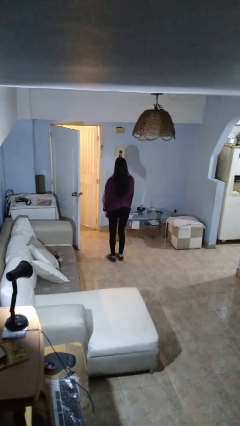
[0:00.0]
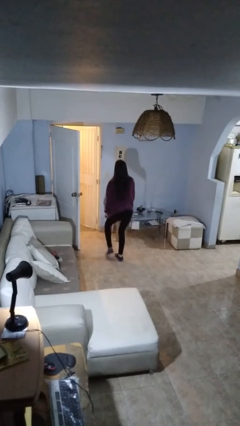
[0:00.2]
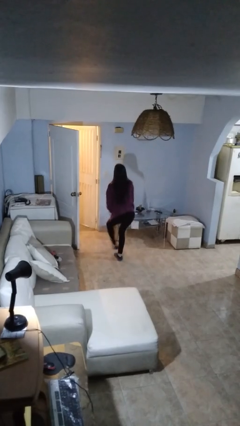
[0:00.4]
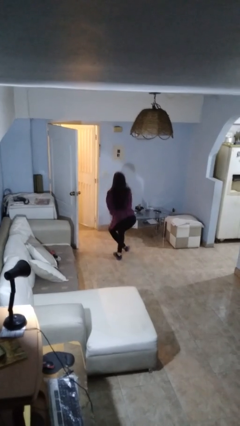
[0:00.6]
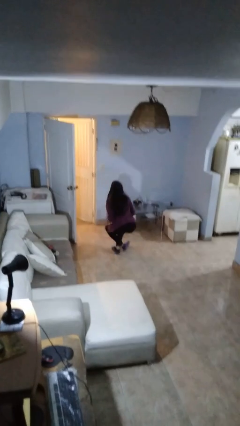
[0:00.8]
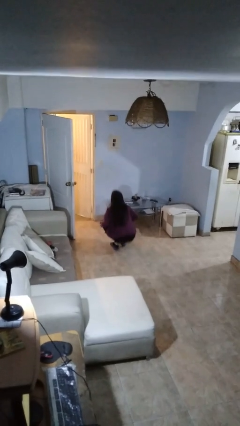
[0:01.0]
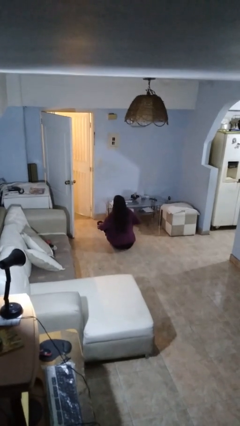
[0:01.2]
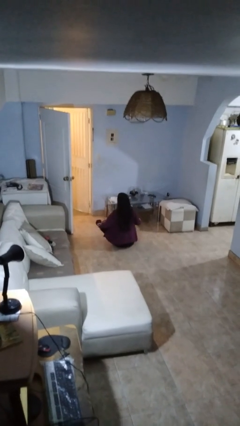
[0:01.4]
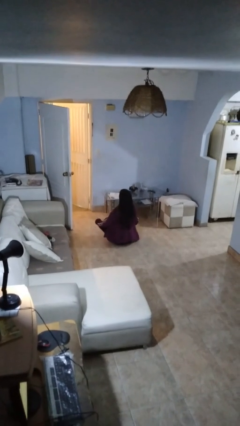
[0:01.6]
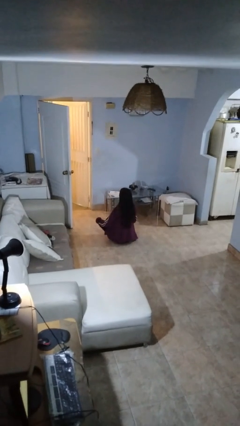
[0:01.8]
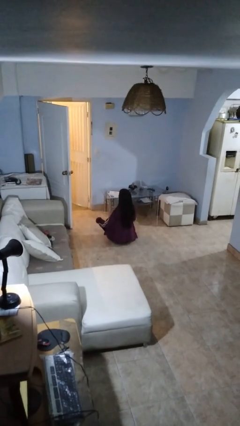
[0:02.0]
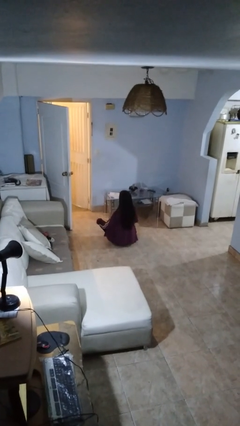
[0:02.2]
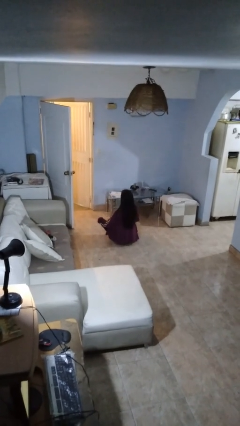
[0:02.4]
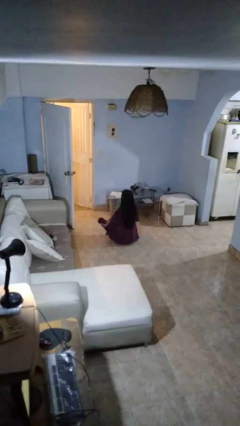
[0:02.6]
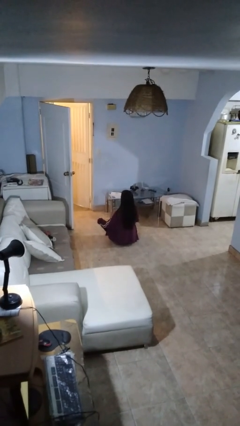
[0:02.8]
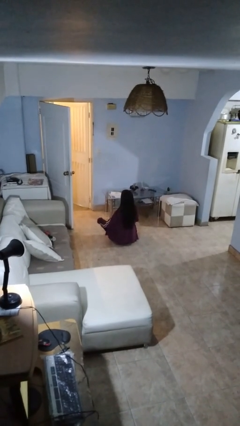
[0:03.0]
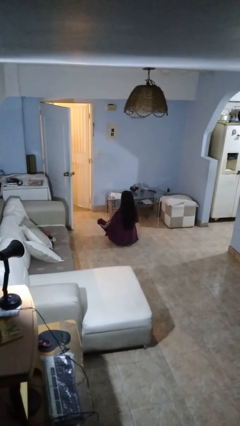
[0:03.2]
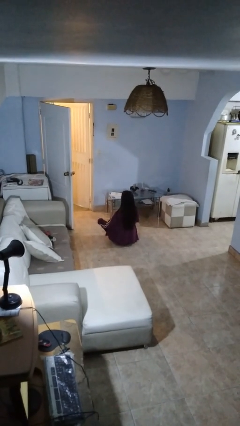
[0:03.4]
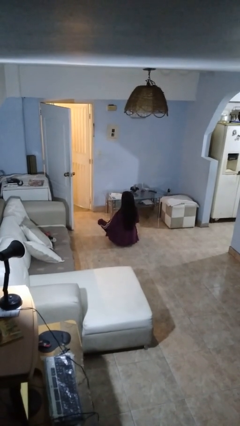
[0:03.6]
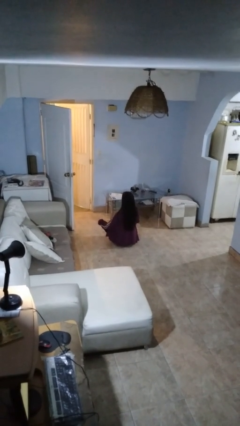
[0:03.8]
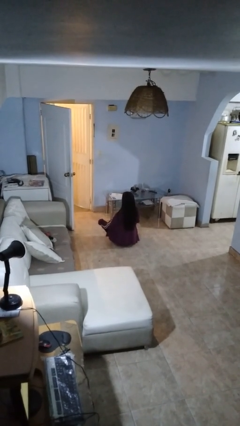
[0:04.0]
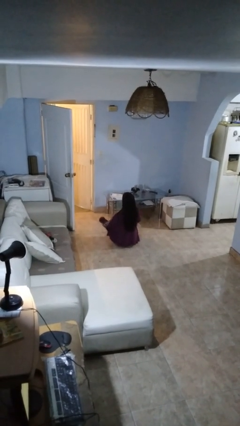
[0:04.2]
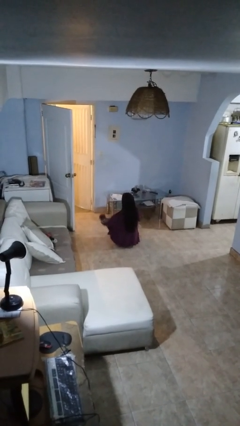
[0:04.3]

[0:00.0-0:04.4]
person sits crisscross

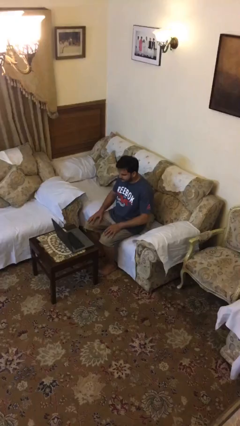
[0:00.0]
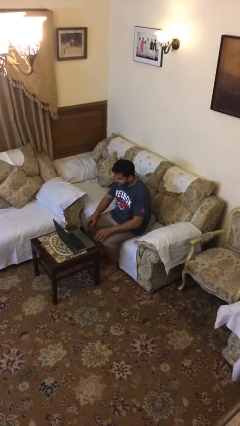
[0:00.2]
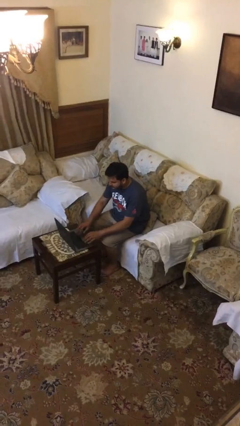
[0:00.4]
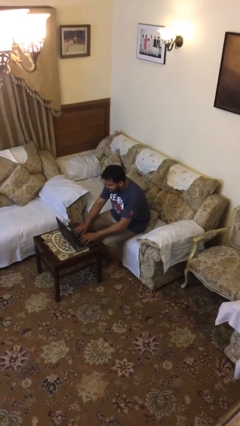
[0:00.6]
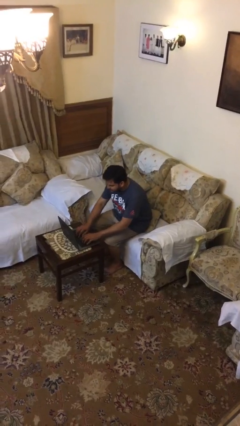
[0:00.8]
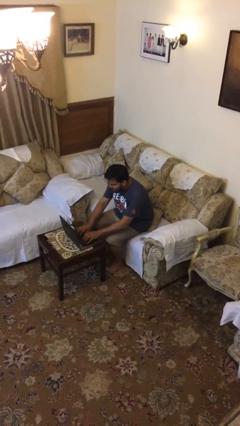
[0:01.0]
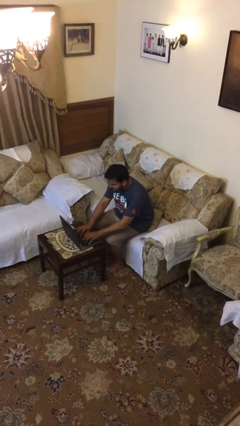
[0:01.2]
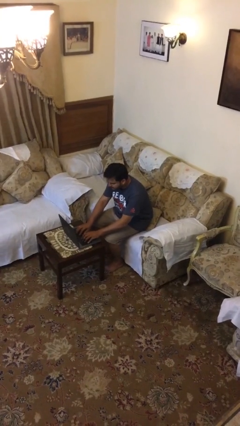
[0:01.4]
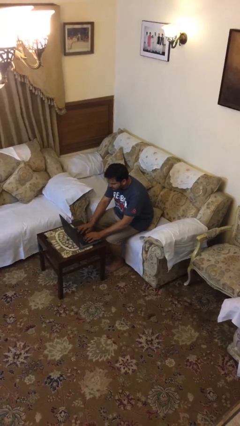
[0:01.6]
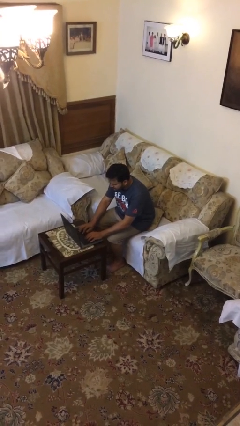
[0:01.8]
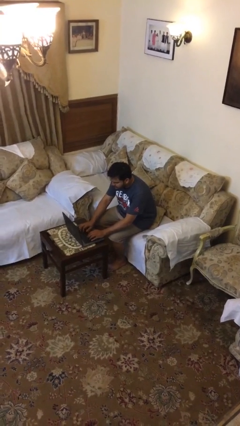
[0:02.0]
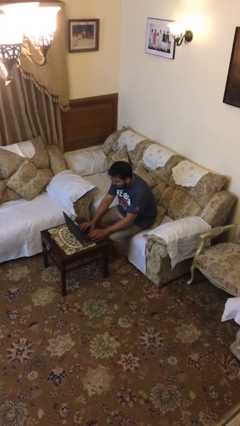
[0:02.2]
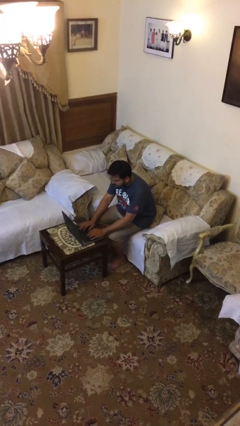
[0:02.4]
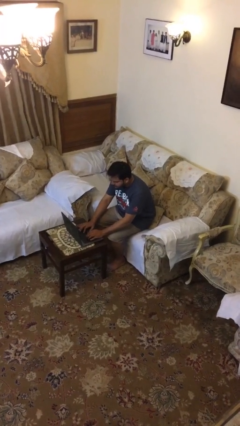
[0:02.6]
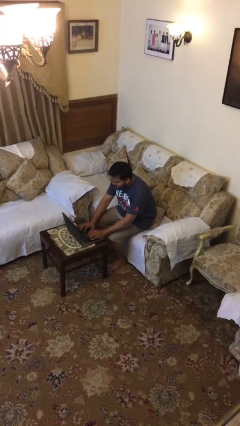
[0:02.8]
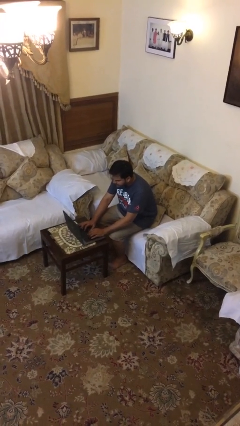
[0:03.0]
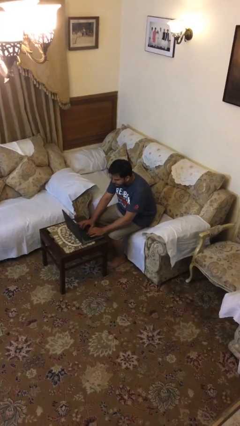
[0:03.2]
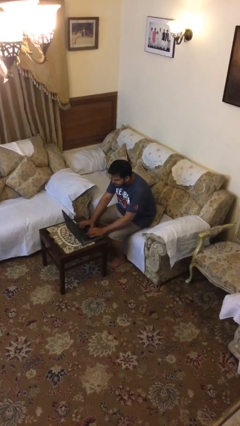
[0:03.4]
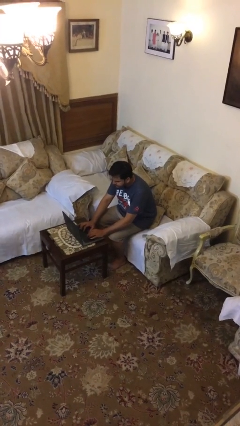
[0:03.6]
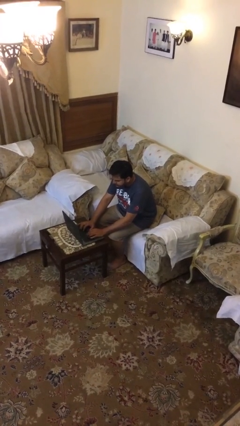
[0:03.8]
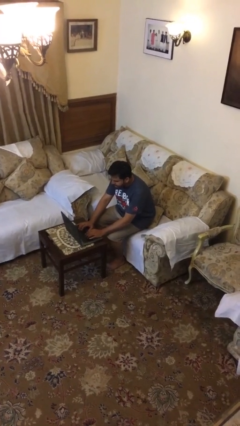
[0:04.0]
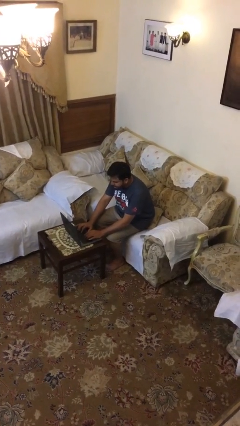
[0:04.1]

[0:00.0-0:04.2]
person interacts with laptop

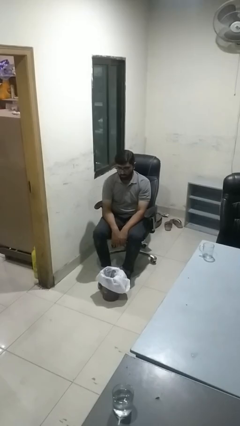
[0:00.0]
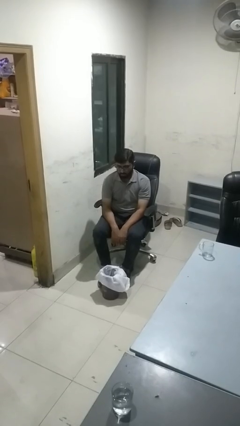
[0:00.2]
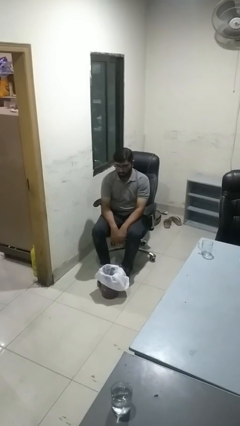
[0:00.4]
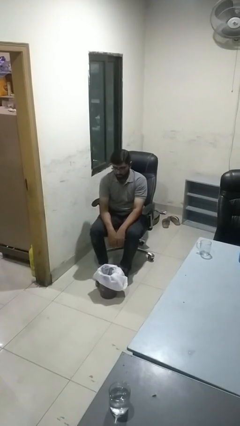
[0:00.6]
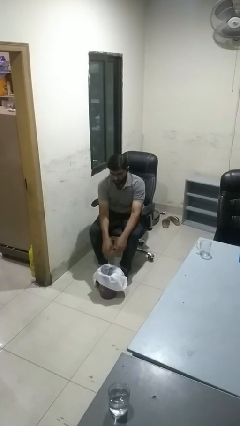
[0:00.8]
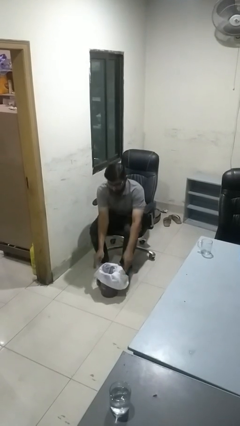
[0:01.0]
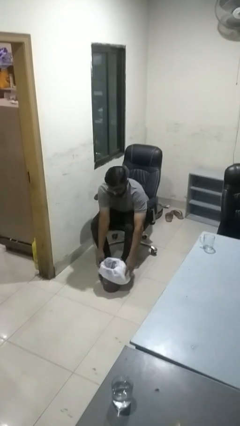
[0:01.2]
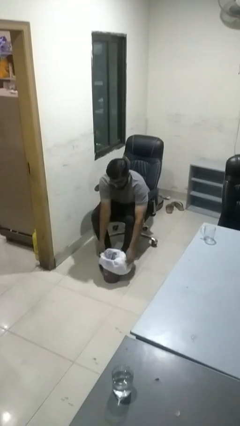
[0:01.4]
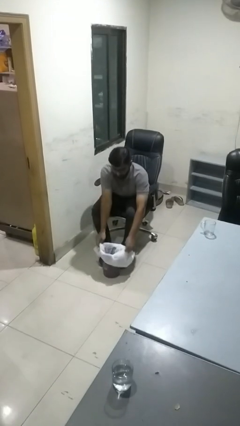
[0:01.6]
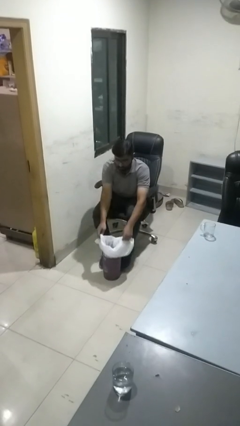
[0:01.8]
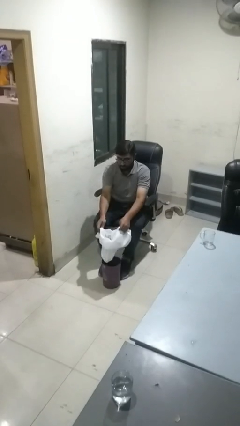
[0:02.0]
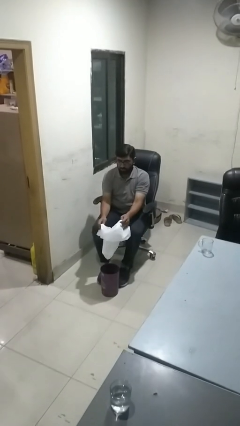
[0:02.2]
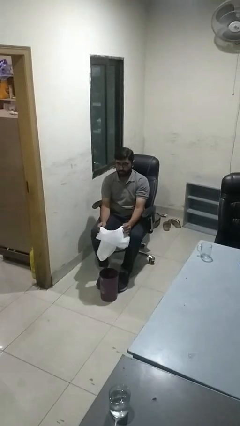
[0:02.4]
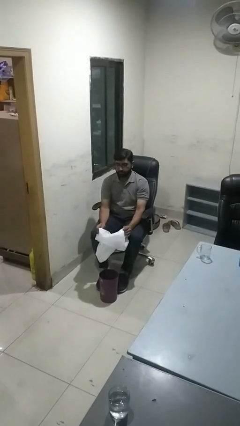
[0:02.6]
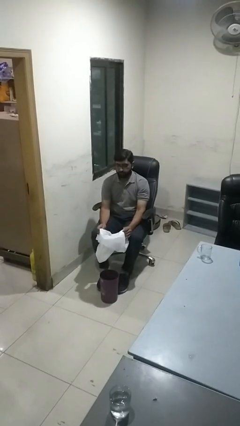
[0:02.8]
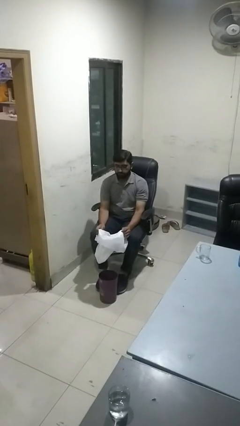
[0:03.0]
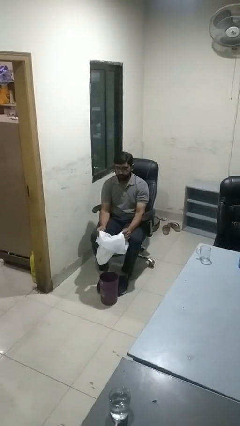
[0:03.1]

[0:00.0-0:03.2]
person removes trashbag from trashcan

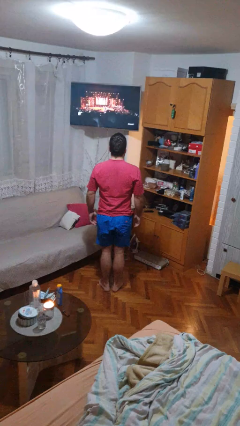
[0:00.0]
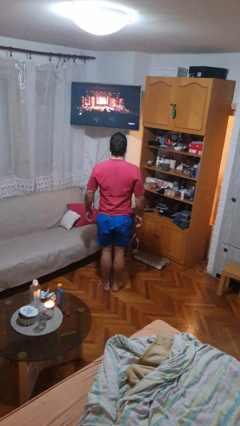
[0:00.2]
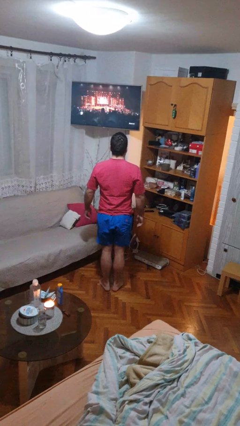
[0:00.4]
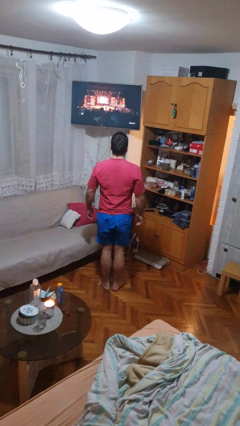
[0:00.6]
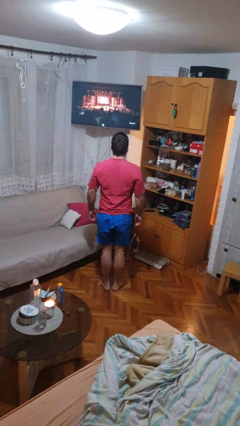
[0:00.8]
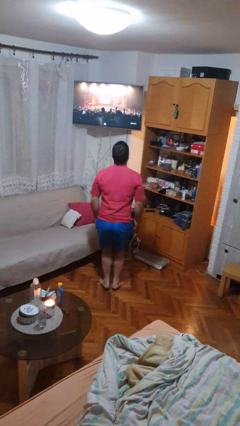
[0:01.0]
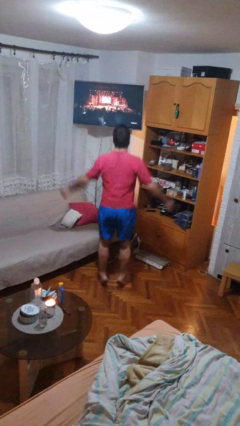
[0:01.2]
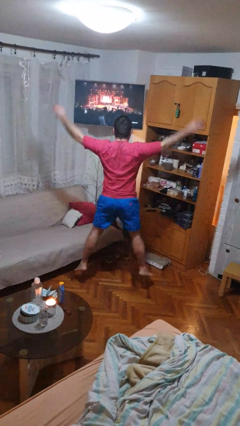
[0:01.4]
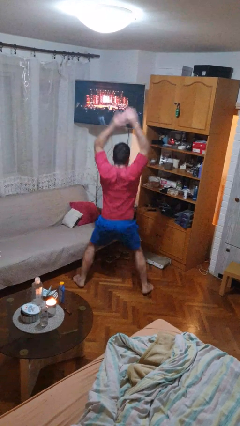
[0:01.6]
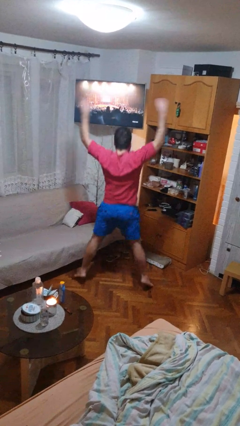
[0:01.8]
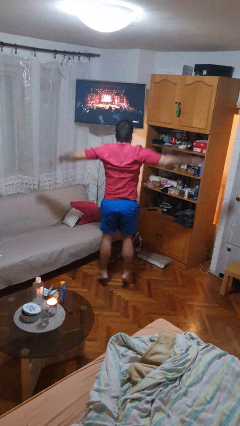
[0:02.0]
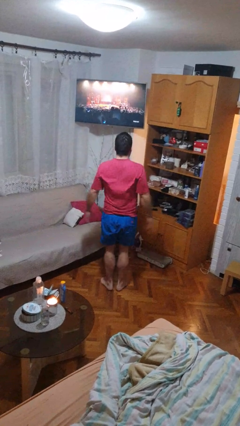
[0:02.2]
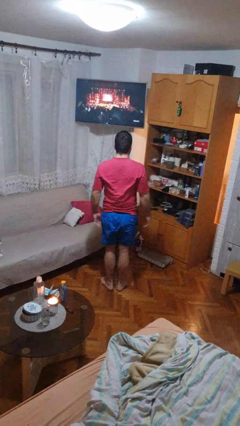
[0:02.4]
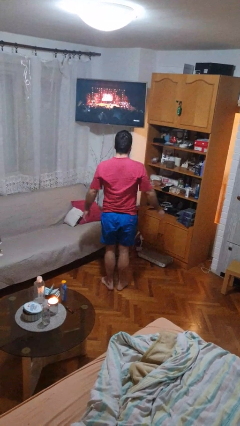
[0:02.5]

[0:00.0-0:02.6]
person exercises with jumping jacks

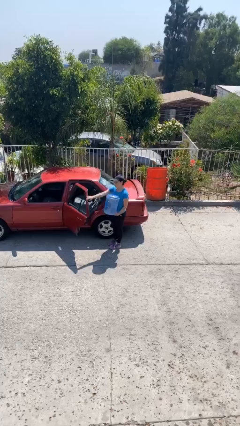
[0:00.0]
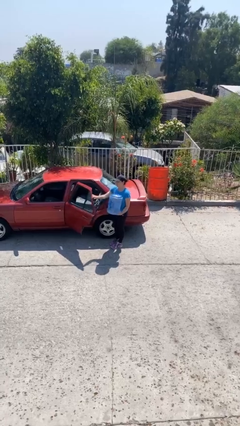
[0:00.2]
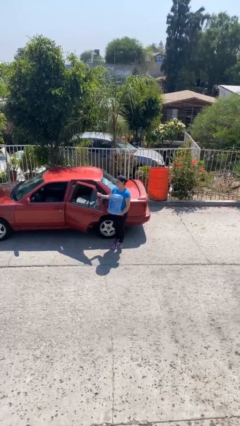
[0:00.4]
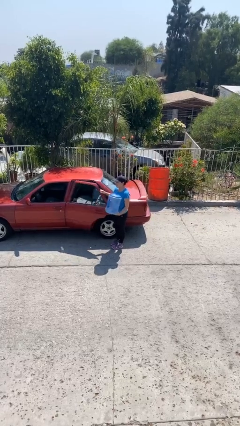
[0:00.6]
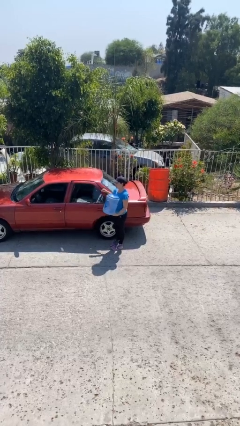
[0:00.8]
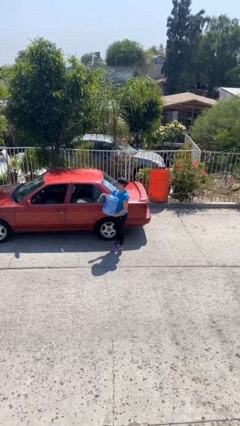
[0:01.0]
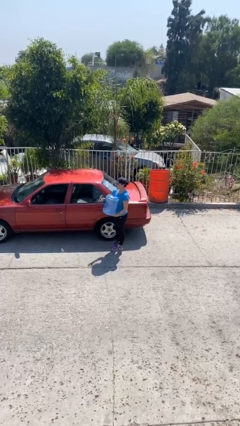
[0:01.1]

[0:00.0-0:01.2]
person closes car door

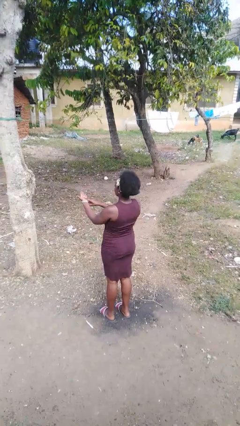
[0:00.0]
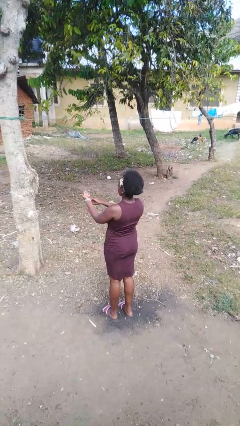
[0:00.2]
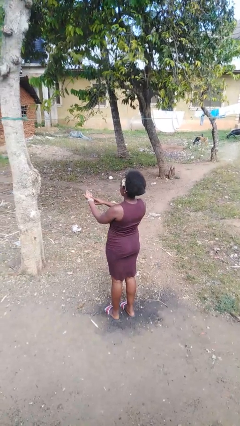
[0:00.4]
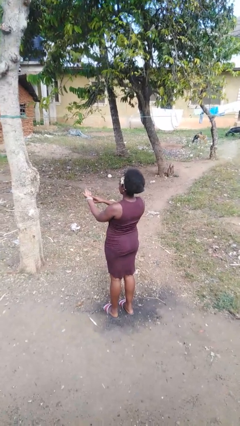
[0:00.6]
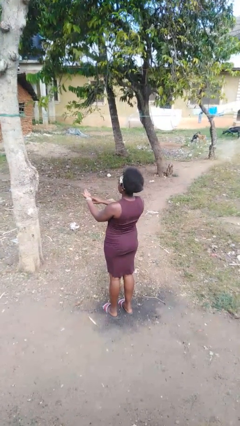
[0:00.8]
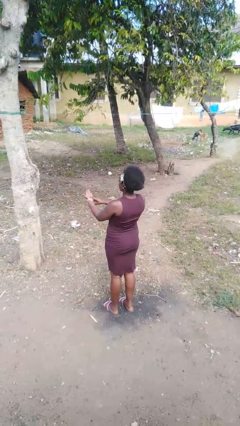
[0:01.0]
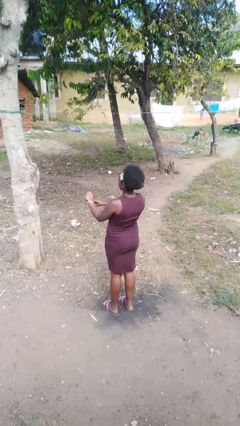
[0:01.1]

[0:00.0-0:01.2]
person gestures number one

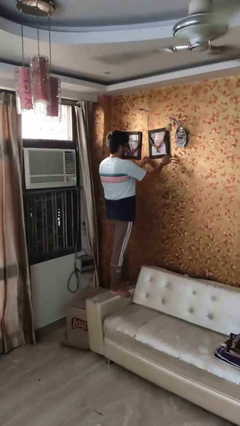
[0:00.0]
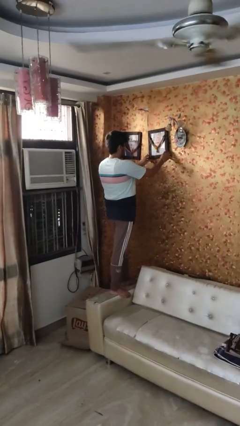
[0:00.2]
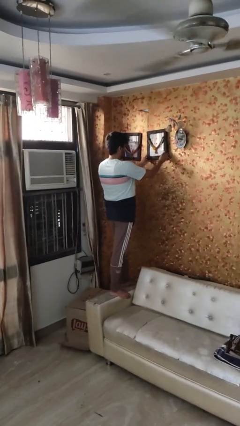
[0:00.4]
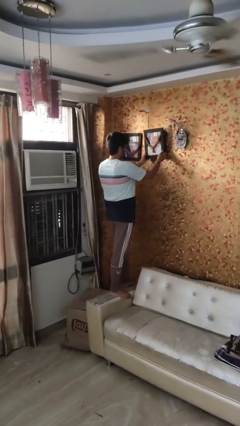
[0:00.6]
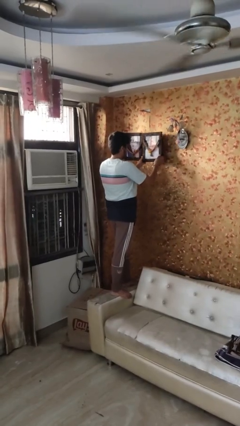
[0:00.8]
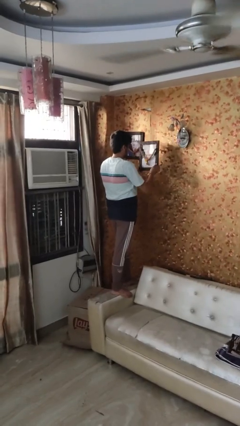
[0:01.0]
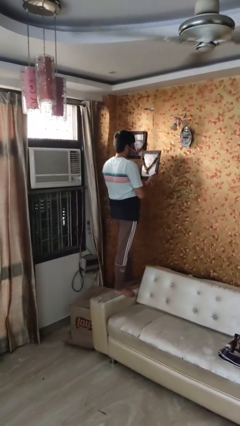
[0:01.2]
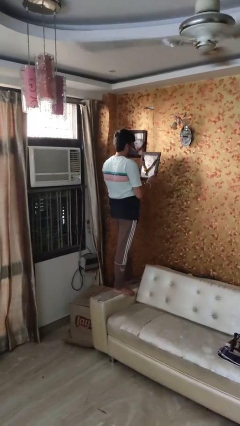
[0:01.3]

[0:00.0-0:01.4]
person takes down picture frame
